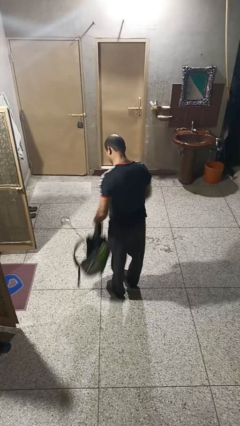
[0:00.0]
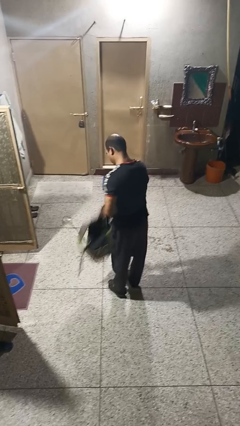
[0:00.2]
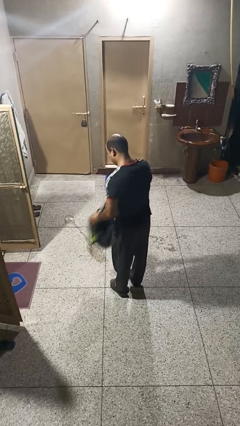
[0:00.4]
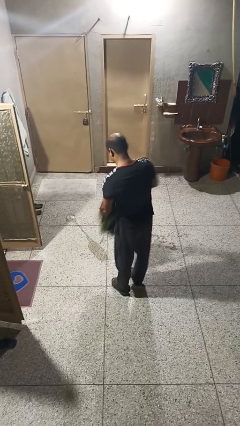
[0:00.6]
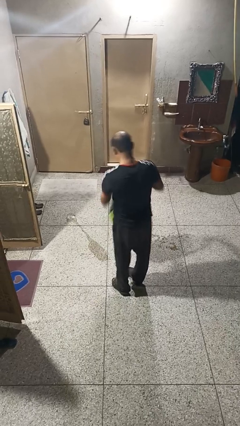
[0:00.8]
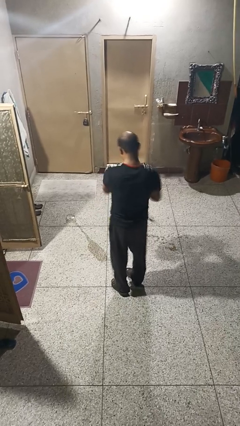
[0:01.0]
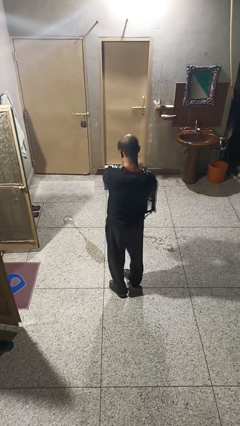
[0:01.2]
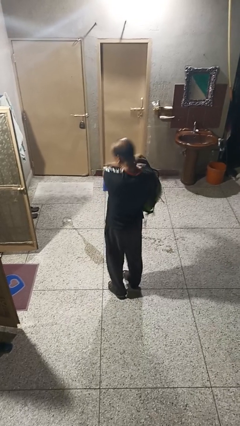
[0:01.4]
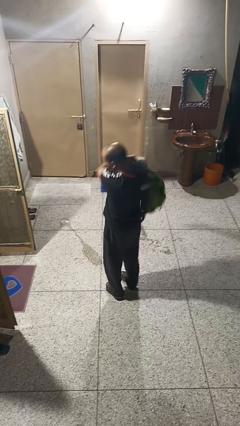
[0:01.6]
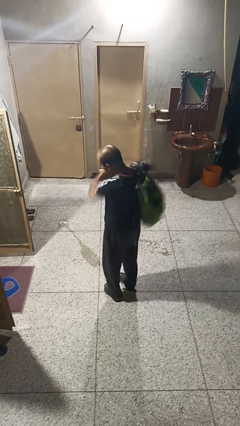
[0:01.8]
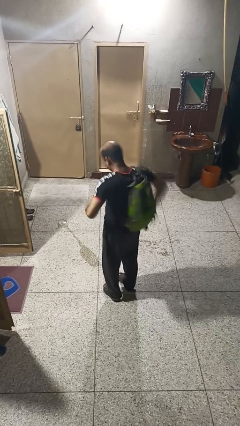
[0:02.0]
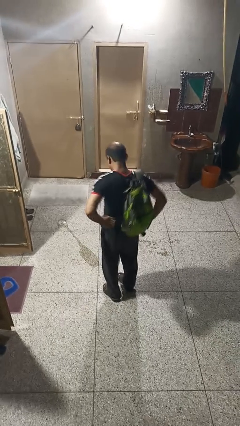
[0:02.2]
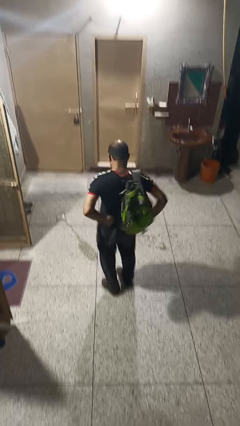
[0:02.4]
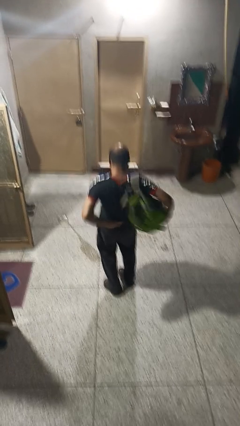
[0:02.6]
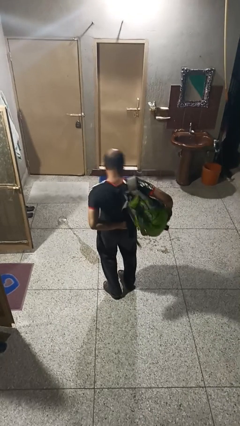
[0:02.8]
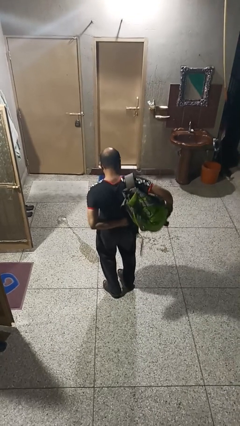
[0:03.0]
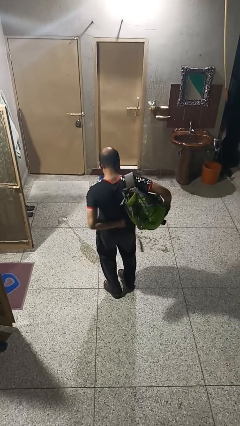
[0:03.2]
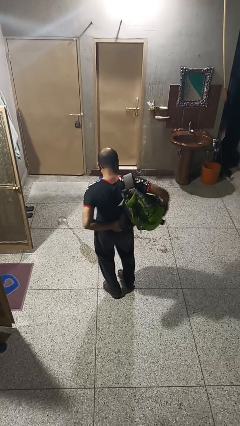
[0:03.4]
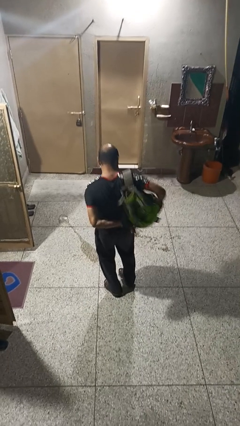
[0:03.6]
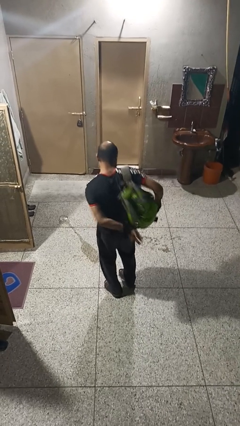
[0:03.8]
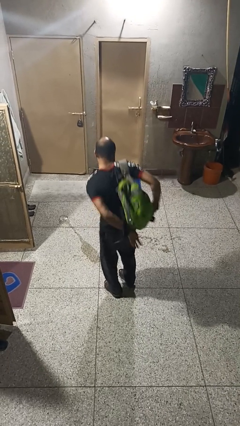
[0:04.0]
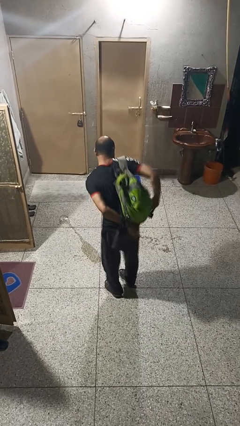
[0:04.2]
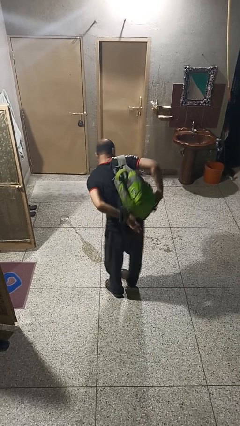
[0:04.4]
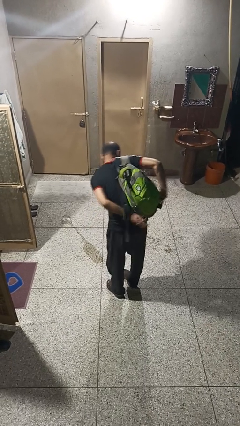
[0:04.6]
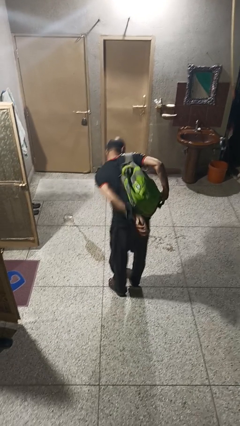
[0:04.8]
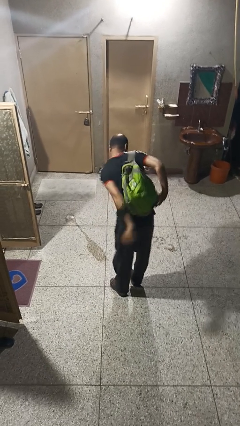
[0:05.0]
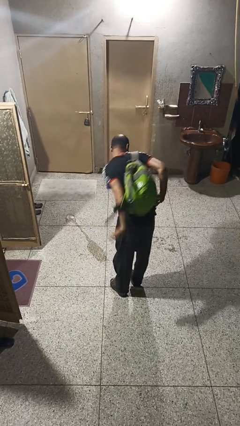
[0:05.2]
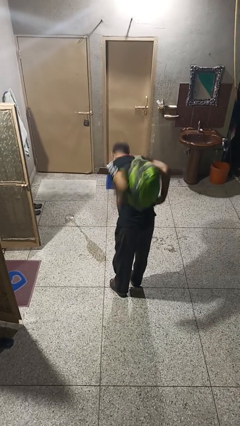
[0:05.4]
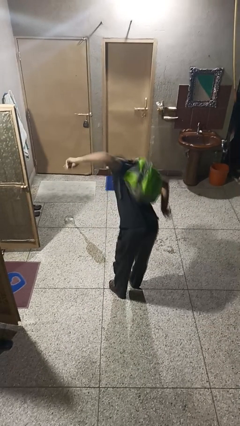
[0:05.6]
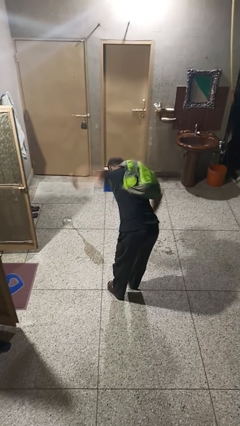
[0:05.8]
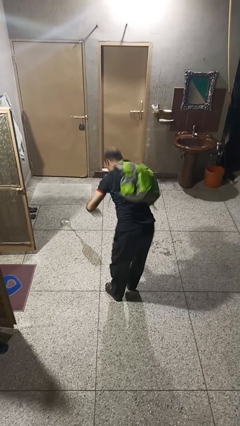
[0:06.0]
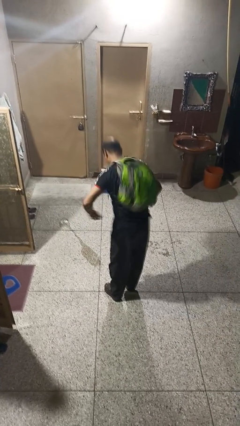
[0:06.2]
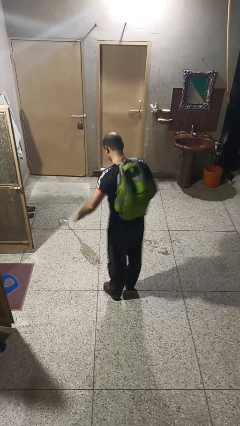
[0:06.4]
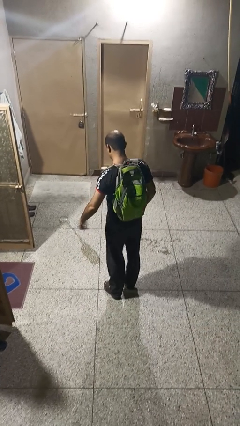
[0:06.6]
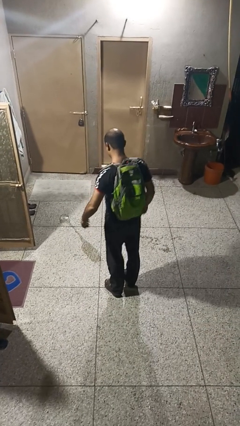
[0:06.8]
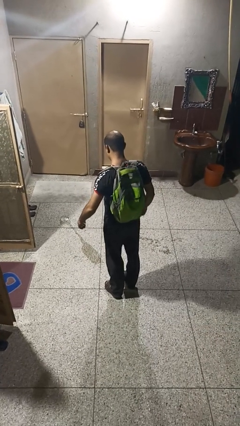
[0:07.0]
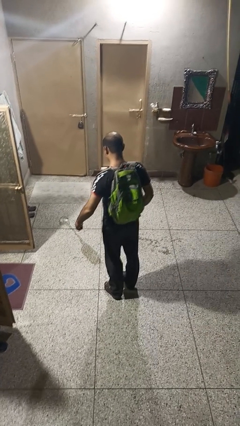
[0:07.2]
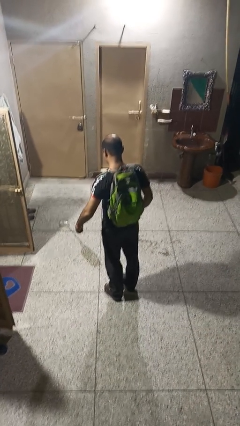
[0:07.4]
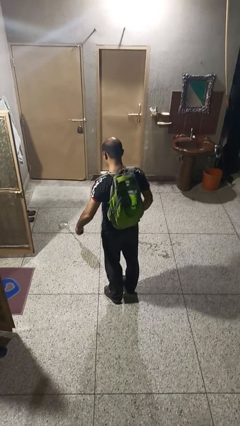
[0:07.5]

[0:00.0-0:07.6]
person puts on backpack

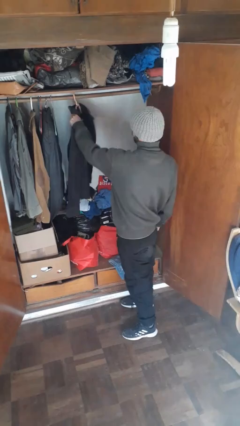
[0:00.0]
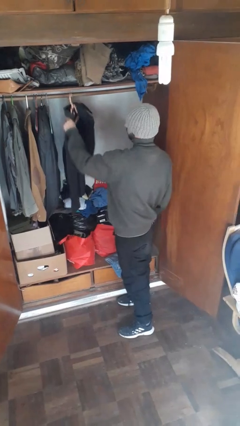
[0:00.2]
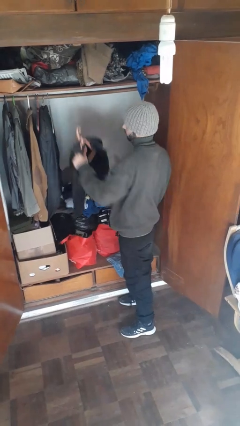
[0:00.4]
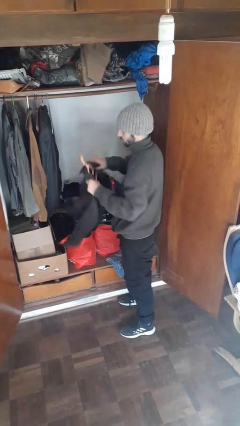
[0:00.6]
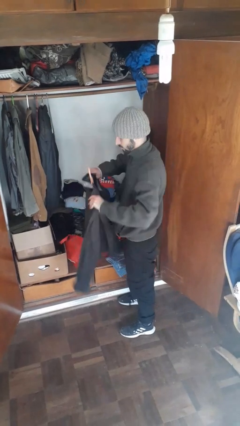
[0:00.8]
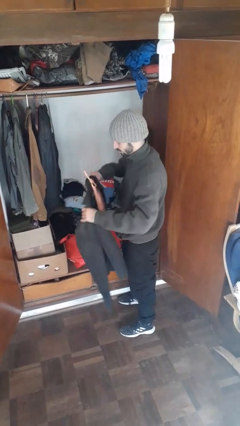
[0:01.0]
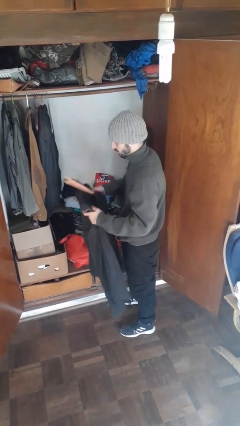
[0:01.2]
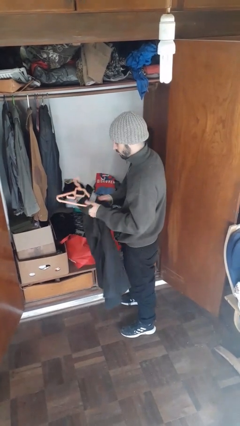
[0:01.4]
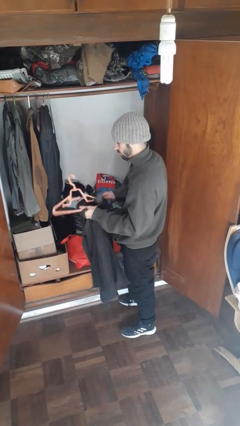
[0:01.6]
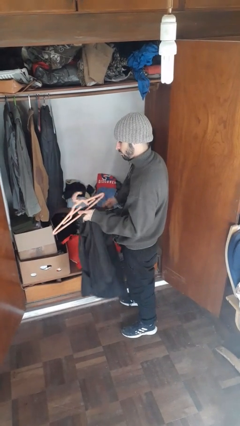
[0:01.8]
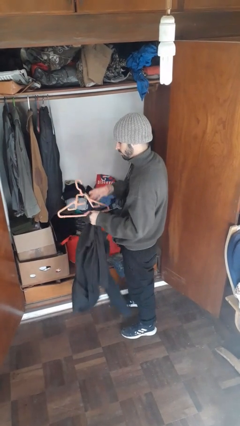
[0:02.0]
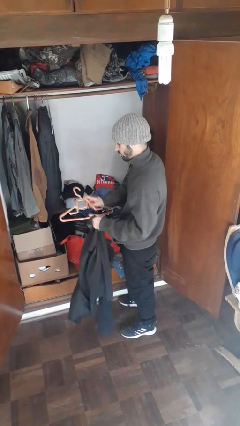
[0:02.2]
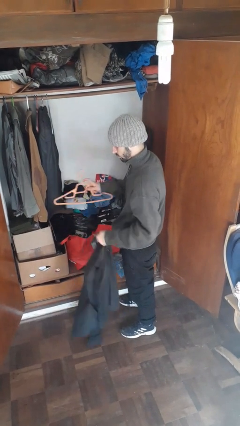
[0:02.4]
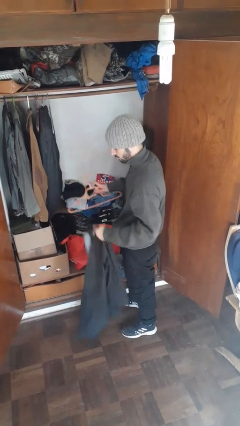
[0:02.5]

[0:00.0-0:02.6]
person takes clothes from closet

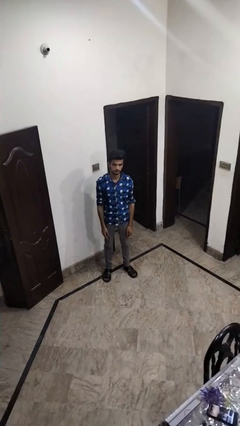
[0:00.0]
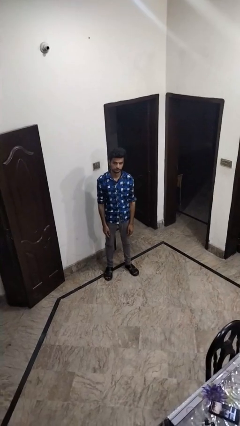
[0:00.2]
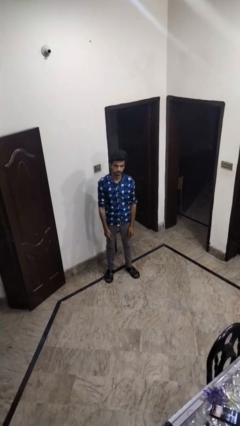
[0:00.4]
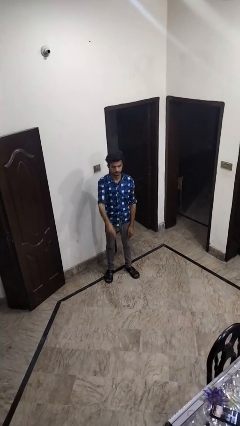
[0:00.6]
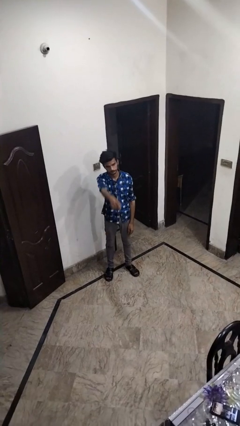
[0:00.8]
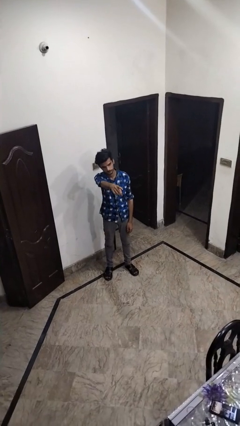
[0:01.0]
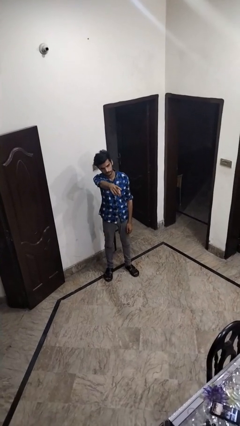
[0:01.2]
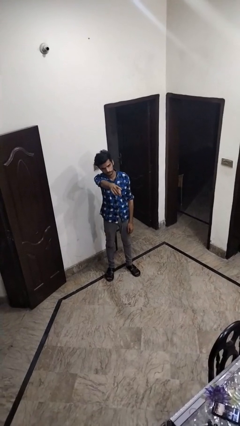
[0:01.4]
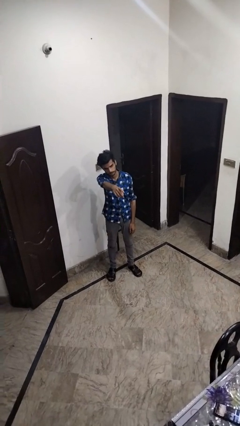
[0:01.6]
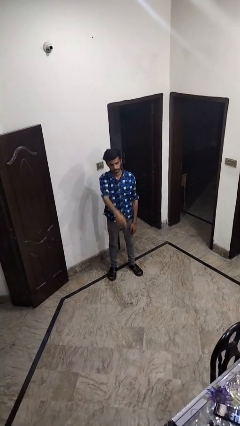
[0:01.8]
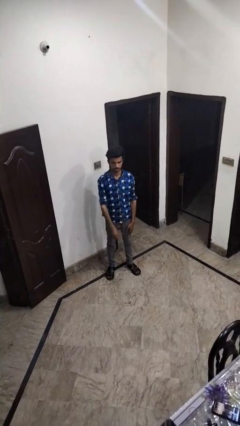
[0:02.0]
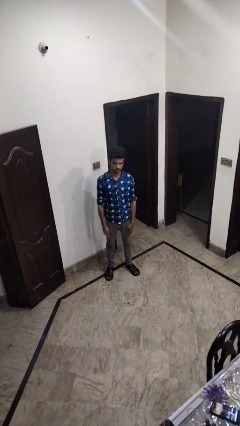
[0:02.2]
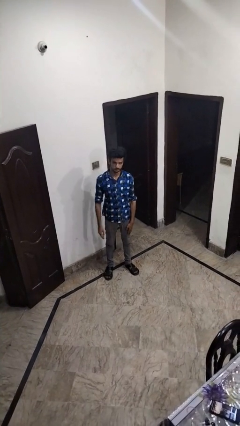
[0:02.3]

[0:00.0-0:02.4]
person points at person

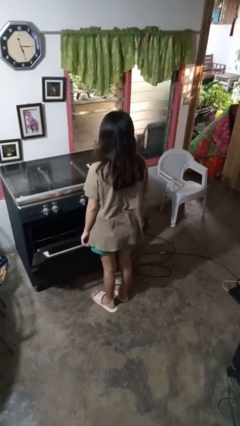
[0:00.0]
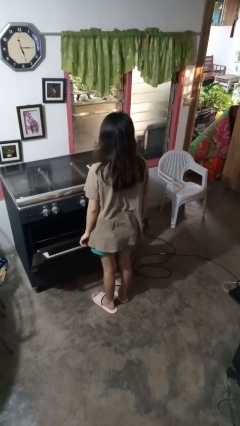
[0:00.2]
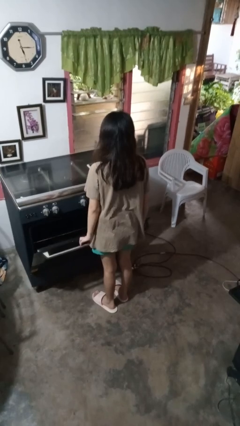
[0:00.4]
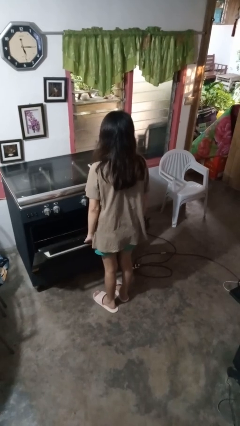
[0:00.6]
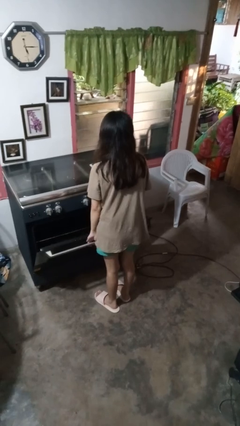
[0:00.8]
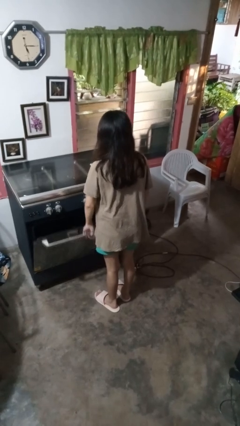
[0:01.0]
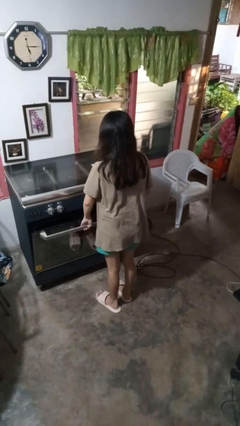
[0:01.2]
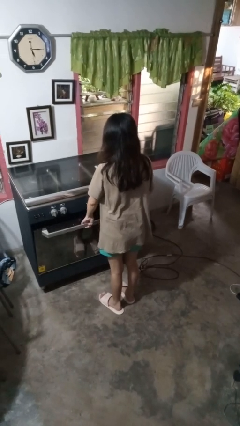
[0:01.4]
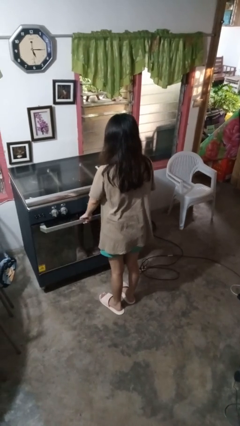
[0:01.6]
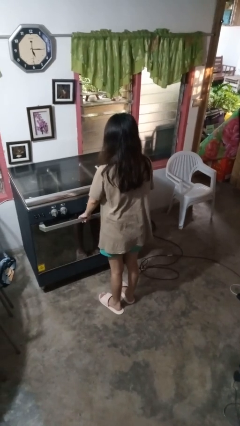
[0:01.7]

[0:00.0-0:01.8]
person closes oven door

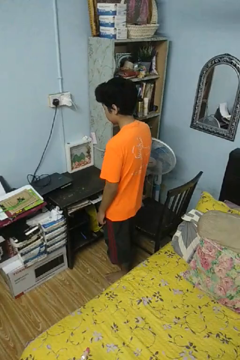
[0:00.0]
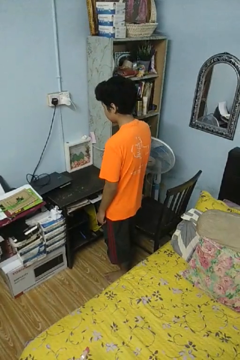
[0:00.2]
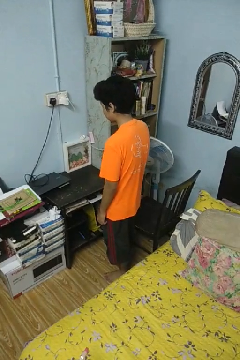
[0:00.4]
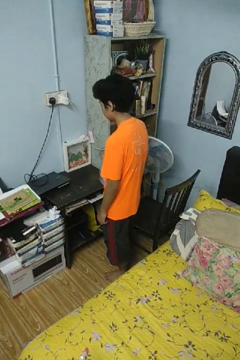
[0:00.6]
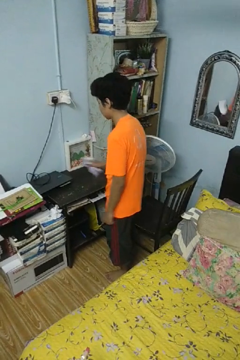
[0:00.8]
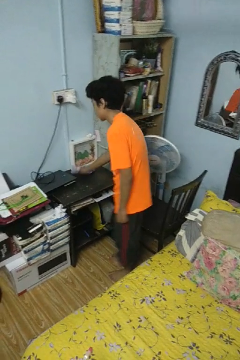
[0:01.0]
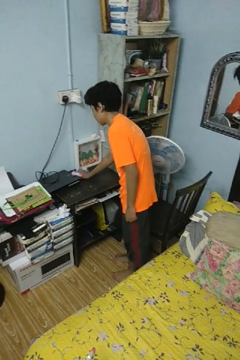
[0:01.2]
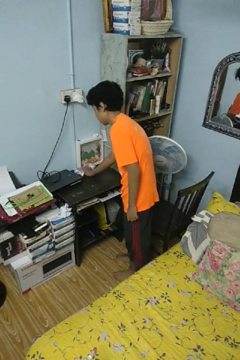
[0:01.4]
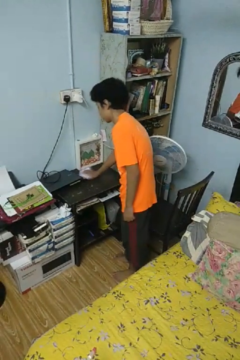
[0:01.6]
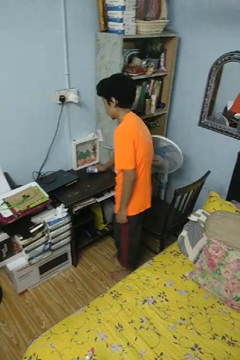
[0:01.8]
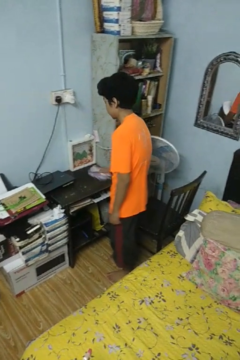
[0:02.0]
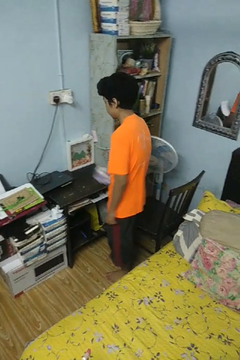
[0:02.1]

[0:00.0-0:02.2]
person cleans table with rag

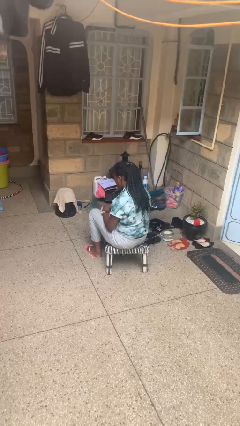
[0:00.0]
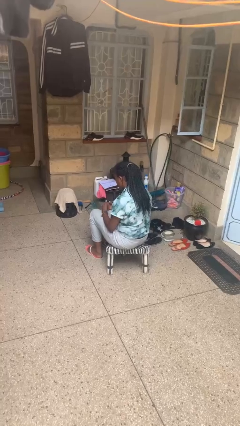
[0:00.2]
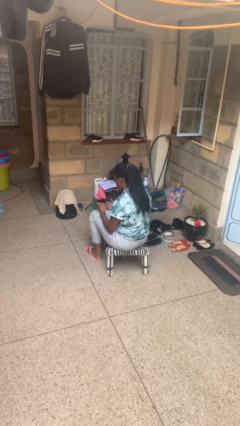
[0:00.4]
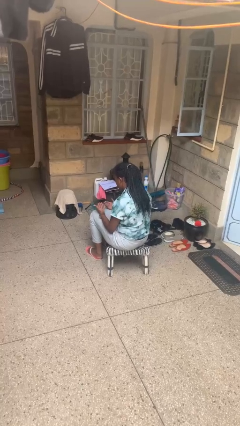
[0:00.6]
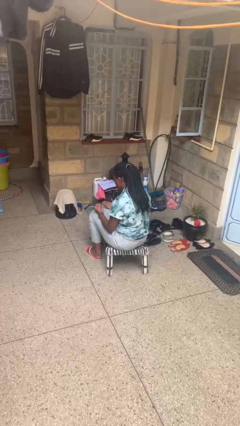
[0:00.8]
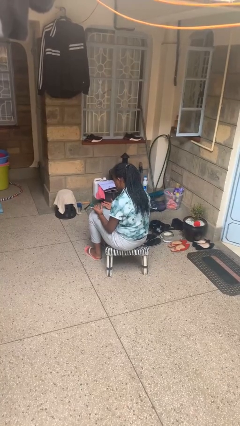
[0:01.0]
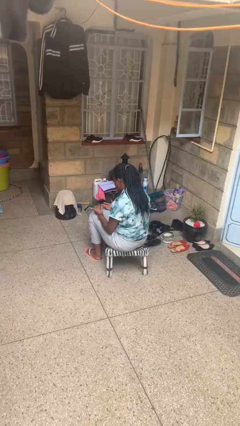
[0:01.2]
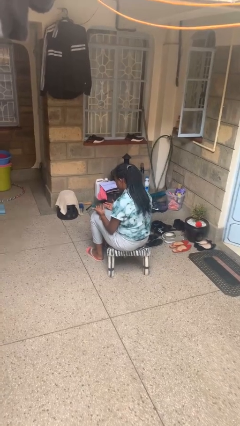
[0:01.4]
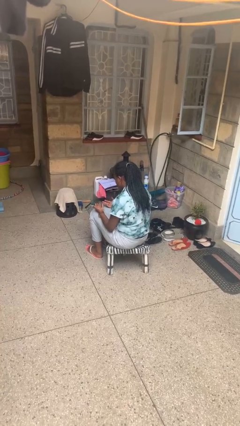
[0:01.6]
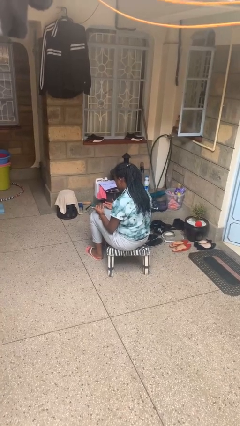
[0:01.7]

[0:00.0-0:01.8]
person looks at hands in lap
